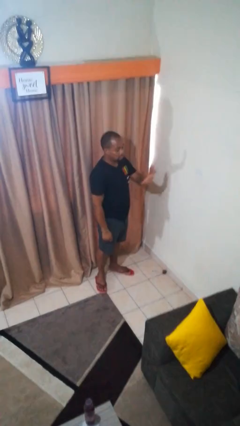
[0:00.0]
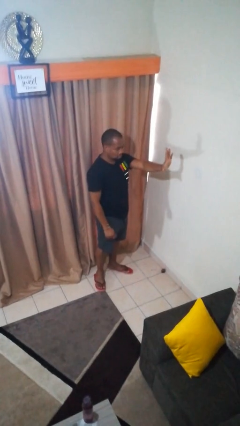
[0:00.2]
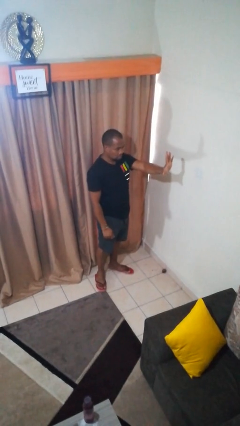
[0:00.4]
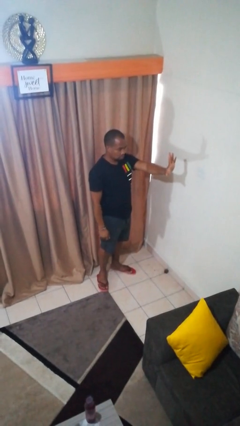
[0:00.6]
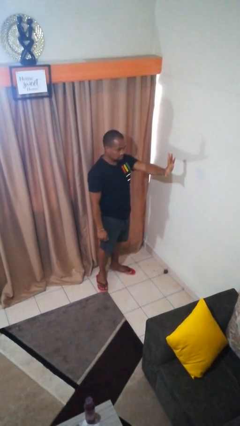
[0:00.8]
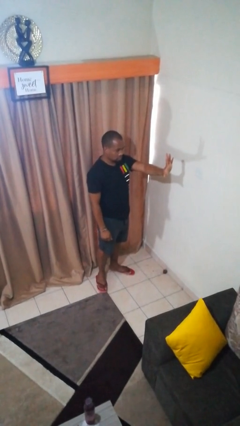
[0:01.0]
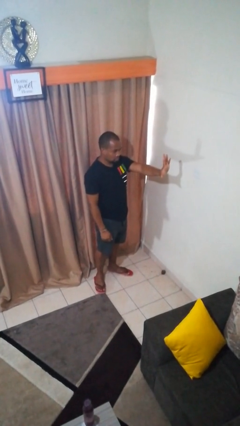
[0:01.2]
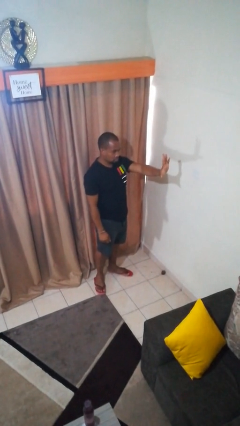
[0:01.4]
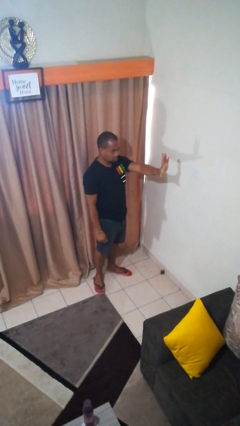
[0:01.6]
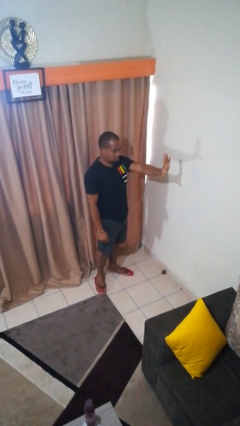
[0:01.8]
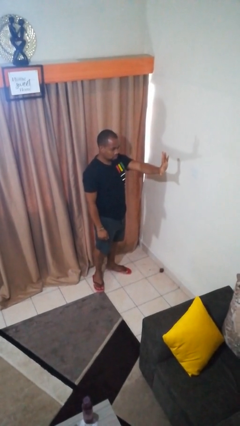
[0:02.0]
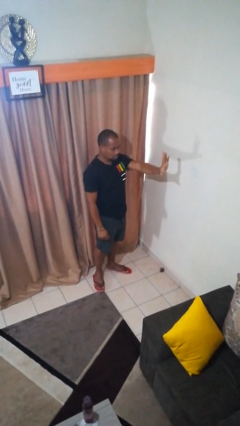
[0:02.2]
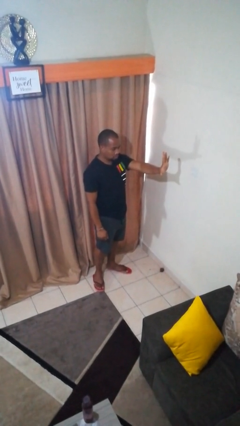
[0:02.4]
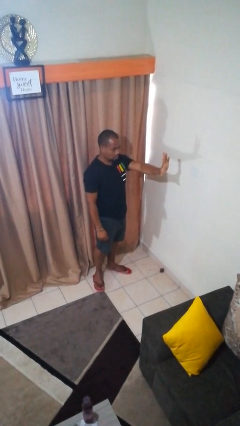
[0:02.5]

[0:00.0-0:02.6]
person gestures number five

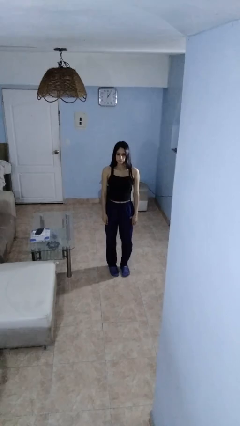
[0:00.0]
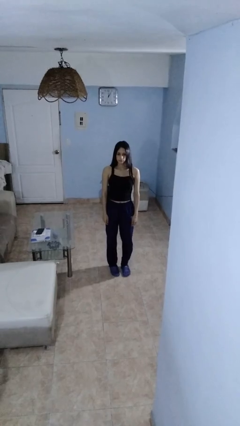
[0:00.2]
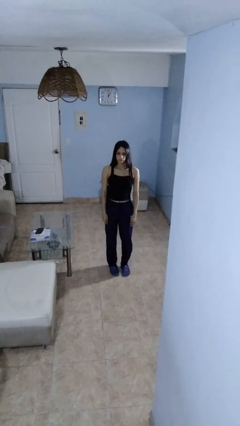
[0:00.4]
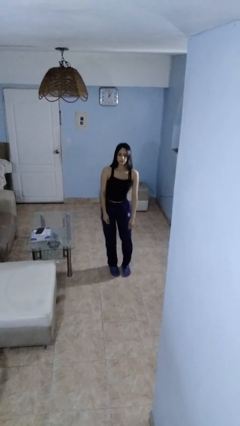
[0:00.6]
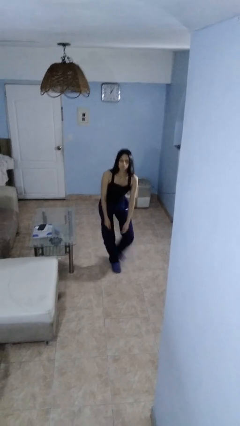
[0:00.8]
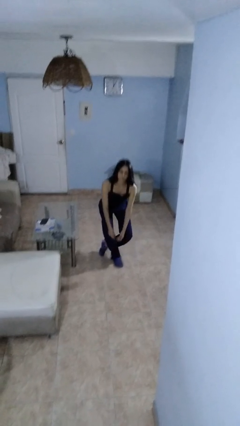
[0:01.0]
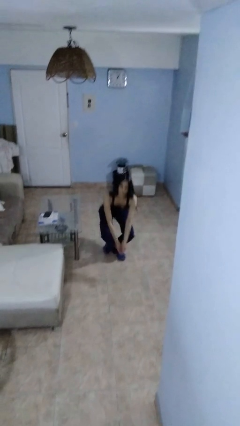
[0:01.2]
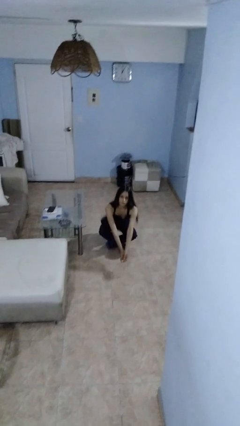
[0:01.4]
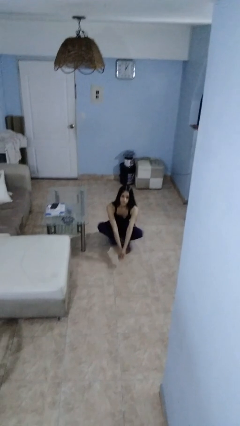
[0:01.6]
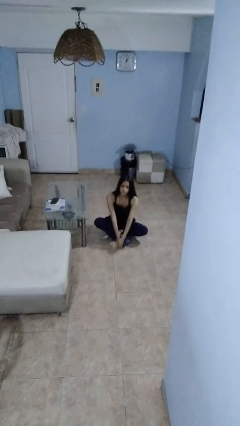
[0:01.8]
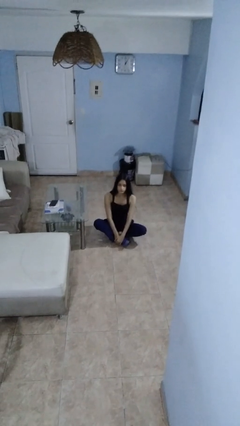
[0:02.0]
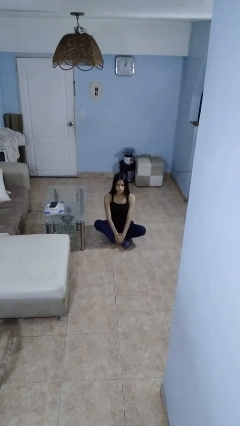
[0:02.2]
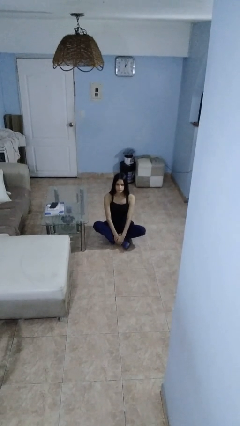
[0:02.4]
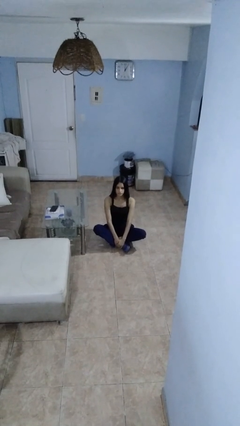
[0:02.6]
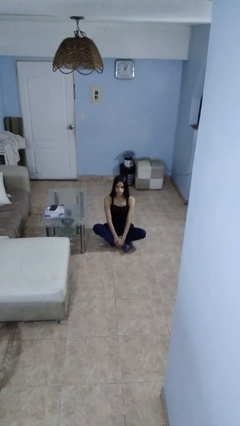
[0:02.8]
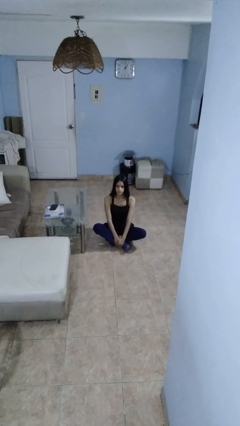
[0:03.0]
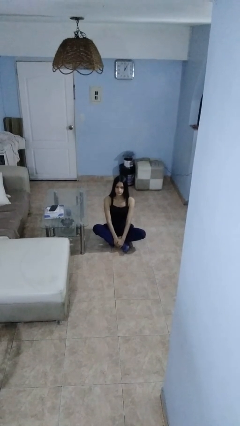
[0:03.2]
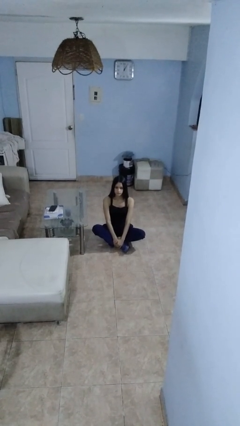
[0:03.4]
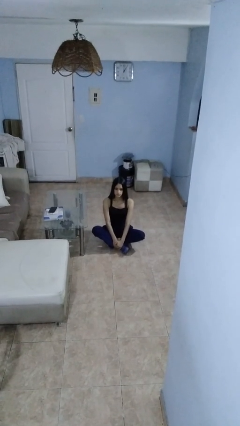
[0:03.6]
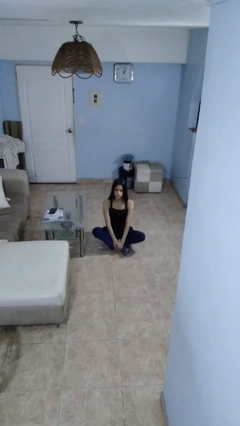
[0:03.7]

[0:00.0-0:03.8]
person sits crisscross

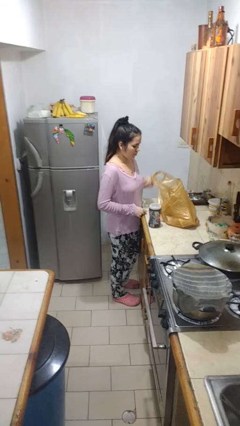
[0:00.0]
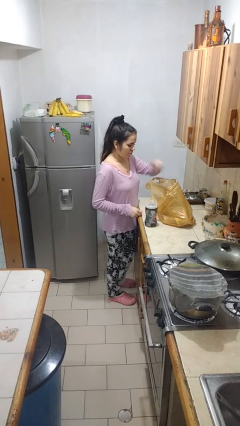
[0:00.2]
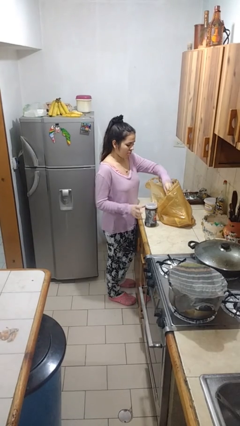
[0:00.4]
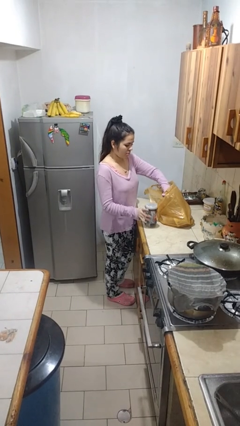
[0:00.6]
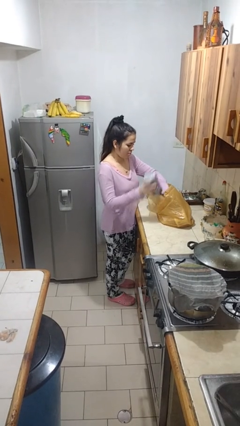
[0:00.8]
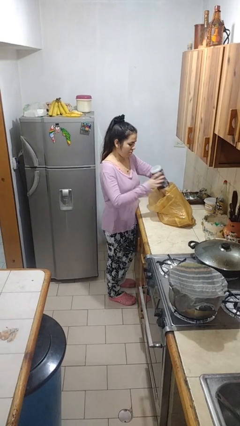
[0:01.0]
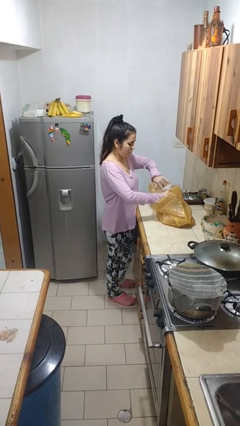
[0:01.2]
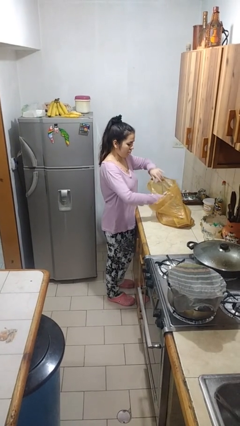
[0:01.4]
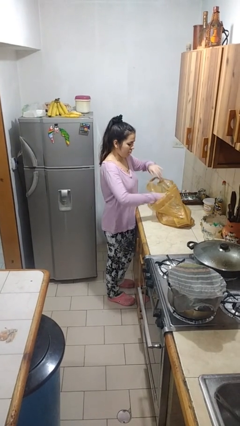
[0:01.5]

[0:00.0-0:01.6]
person puts object into bag

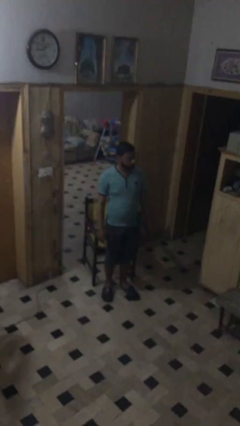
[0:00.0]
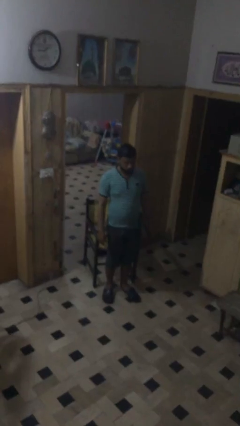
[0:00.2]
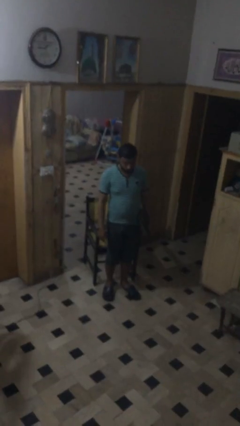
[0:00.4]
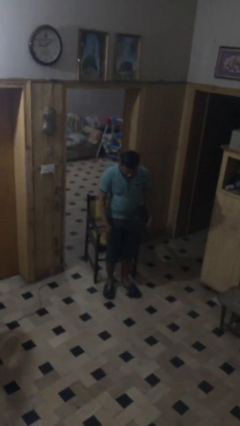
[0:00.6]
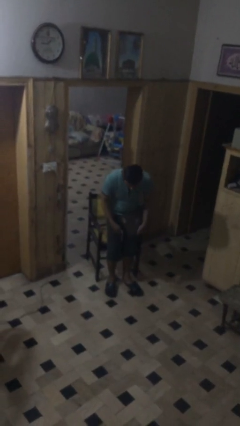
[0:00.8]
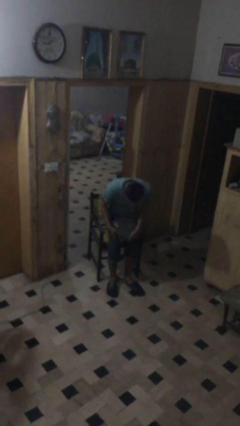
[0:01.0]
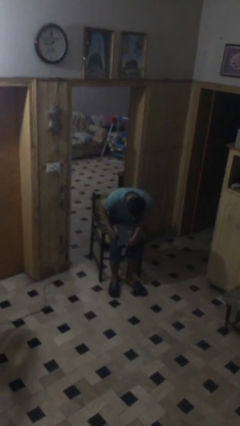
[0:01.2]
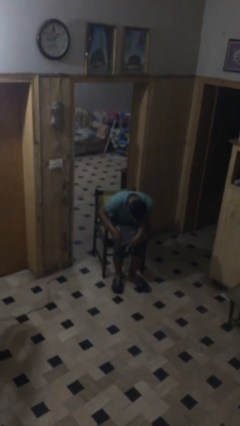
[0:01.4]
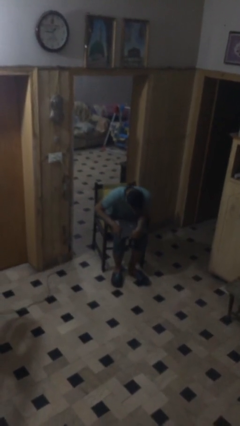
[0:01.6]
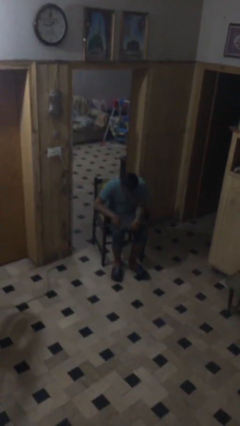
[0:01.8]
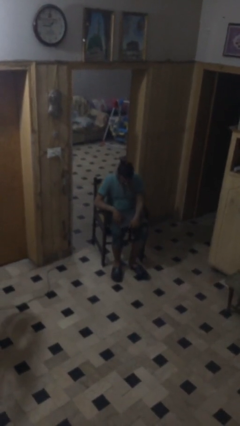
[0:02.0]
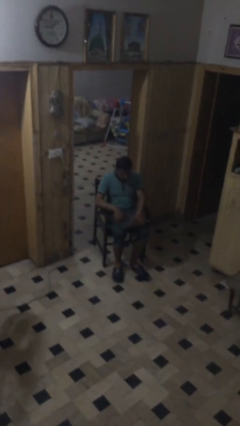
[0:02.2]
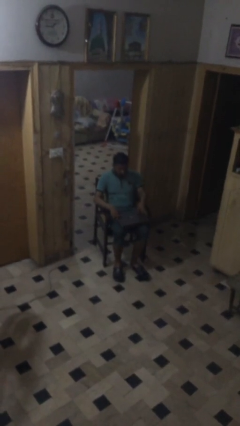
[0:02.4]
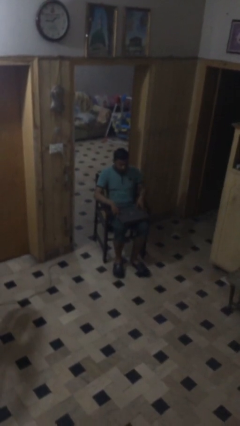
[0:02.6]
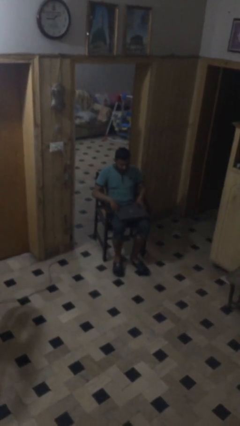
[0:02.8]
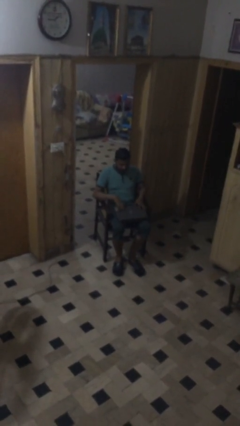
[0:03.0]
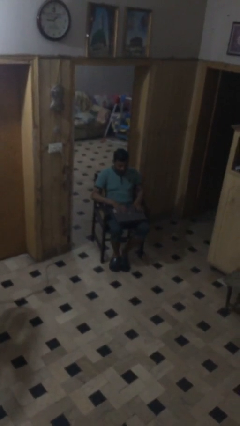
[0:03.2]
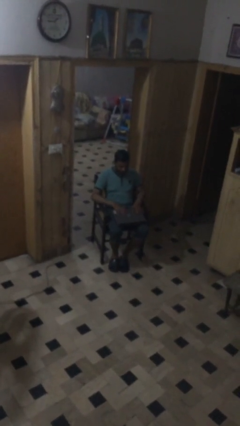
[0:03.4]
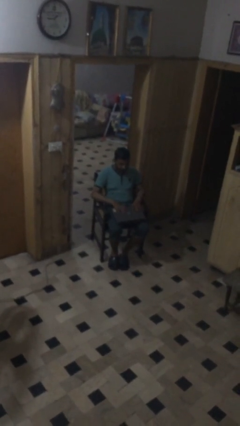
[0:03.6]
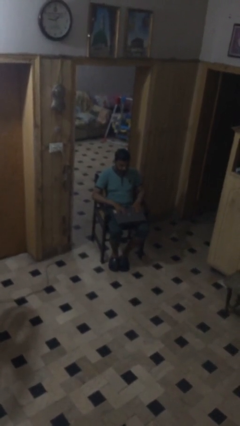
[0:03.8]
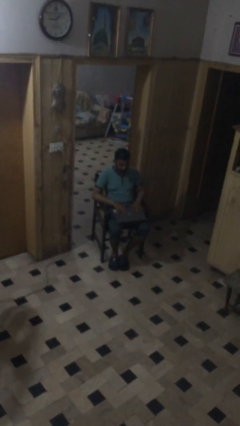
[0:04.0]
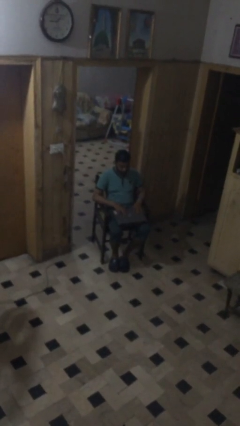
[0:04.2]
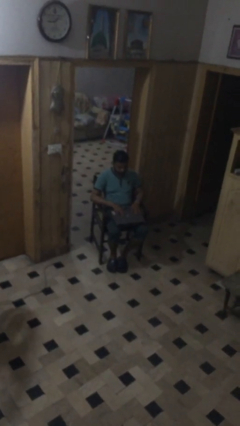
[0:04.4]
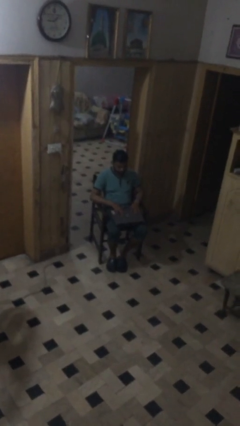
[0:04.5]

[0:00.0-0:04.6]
person sits down

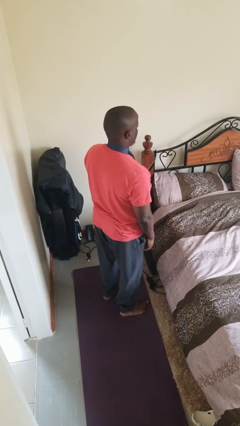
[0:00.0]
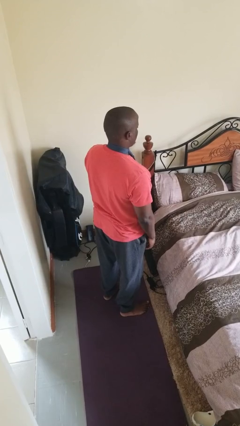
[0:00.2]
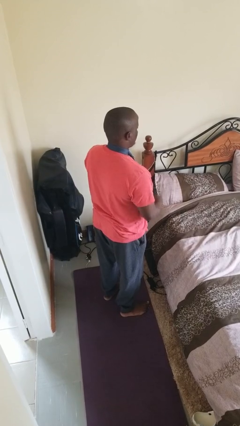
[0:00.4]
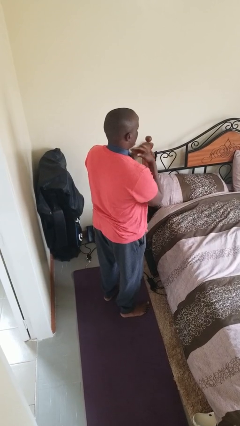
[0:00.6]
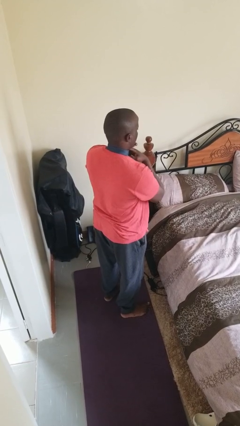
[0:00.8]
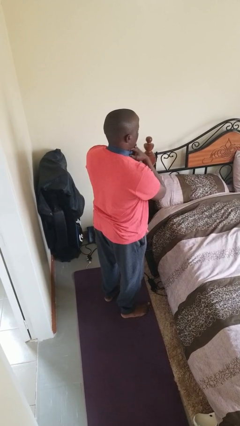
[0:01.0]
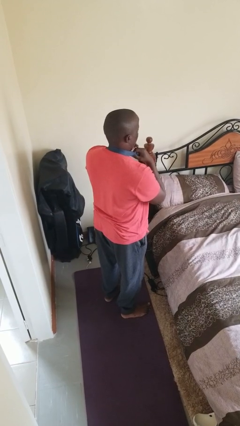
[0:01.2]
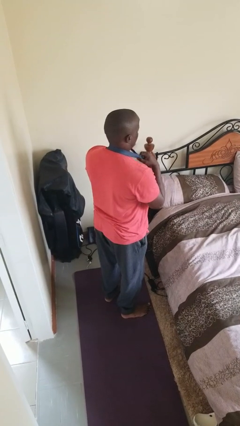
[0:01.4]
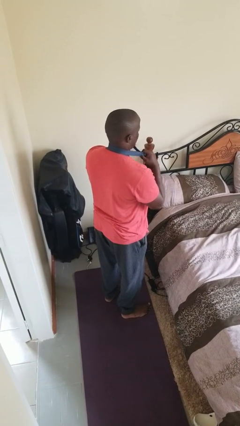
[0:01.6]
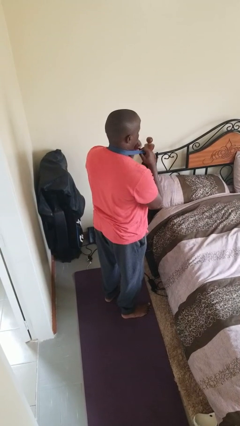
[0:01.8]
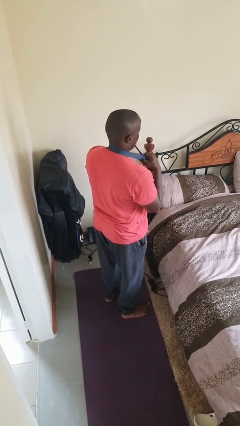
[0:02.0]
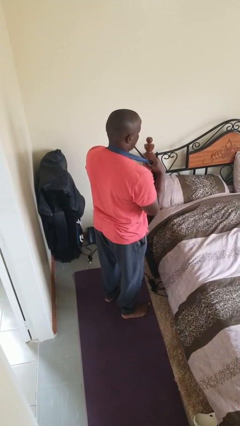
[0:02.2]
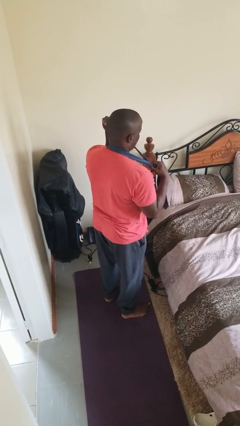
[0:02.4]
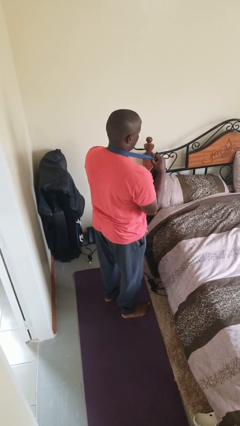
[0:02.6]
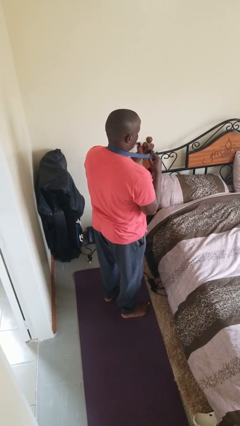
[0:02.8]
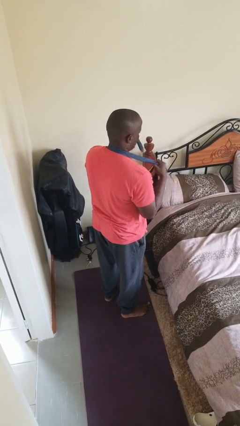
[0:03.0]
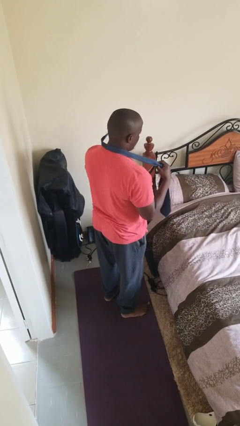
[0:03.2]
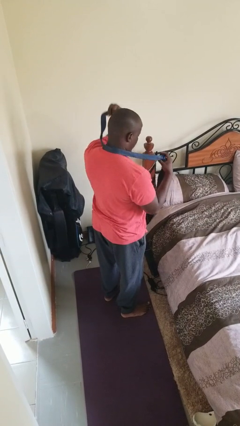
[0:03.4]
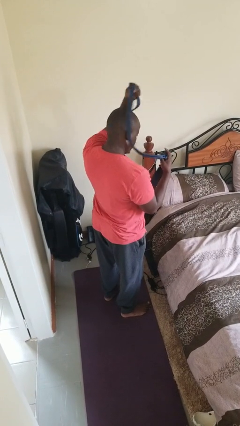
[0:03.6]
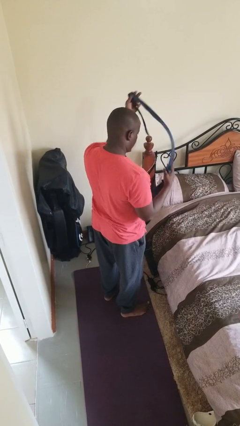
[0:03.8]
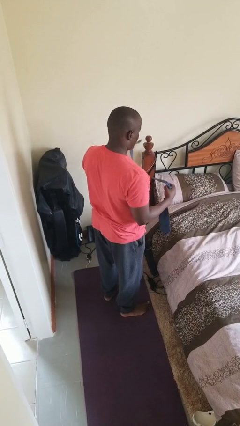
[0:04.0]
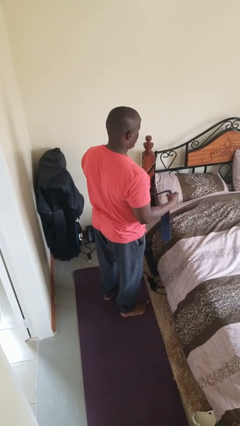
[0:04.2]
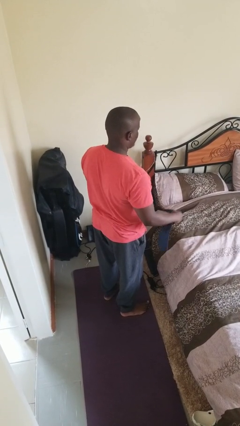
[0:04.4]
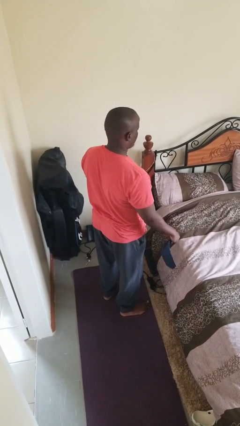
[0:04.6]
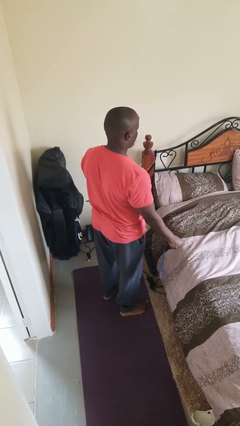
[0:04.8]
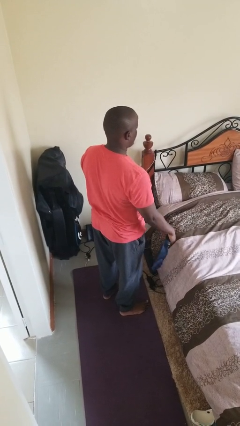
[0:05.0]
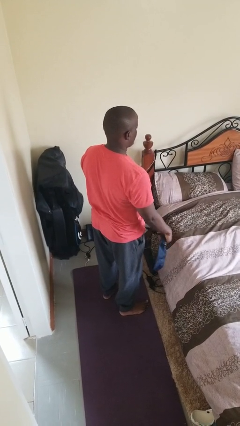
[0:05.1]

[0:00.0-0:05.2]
person takes off necktie
